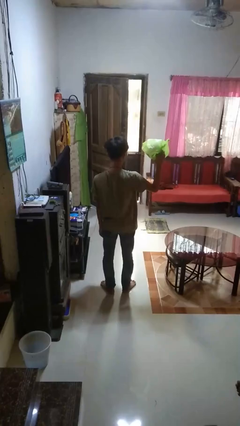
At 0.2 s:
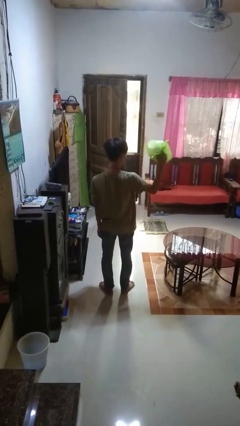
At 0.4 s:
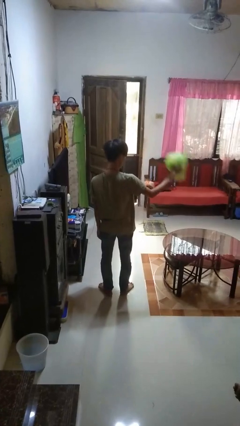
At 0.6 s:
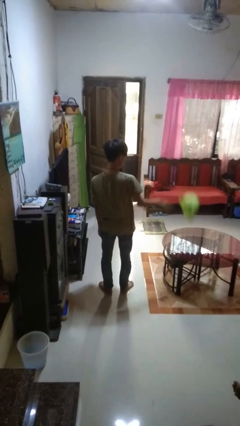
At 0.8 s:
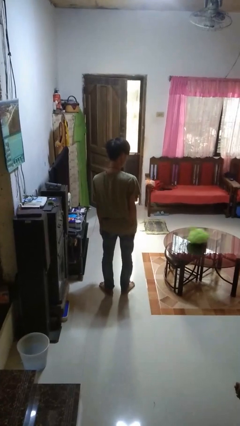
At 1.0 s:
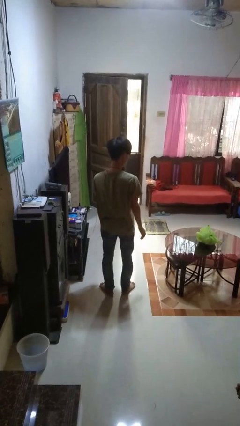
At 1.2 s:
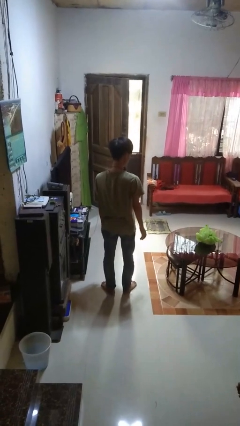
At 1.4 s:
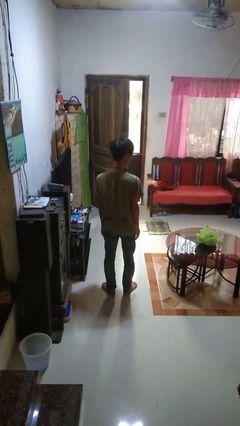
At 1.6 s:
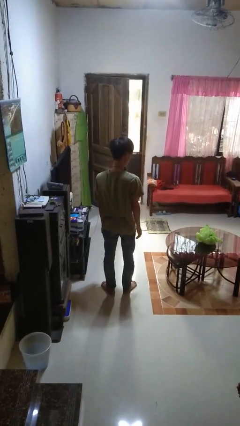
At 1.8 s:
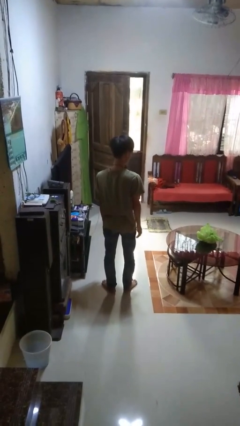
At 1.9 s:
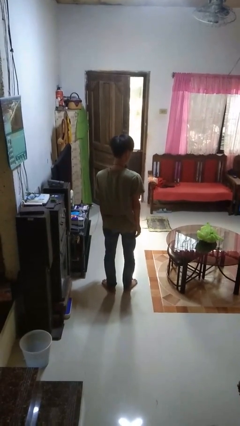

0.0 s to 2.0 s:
person throws object on table

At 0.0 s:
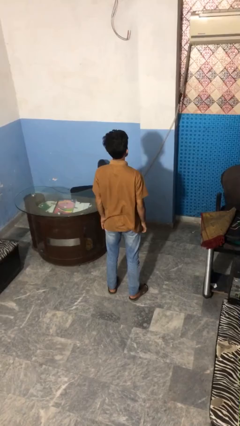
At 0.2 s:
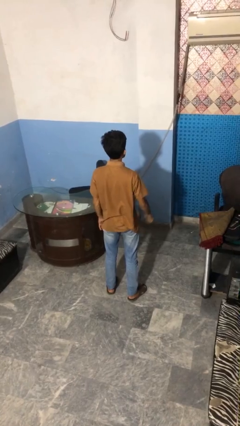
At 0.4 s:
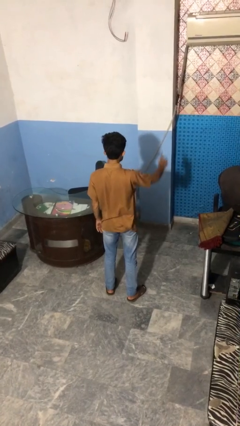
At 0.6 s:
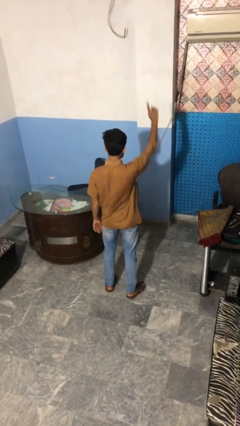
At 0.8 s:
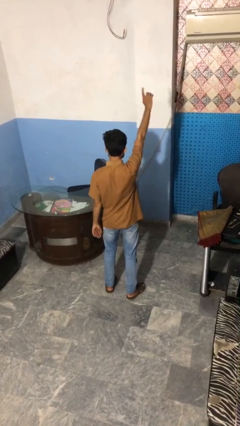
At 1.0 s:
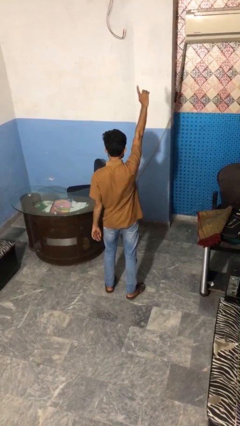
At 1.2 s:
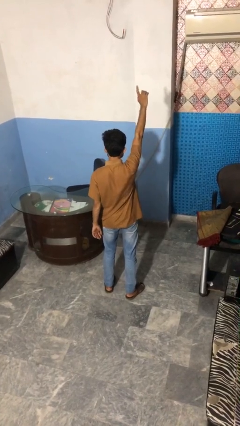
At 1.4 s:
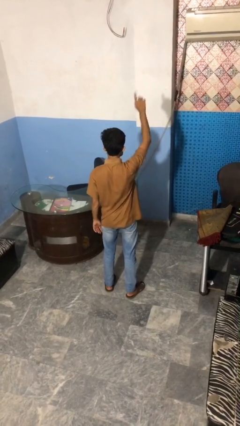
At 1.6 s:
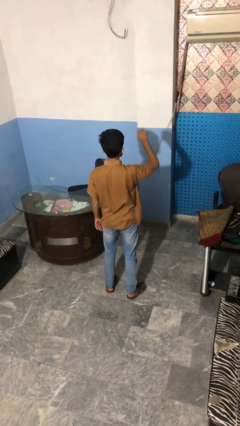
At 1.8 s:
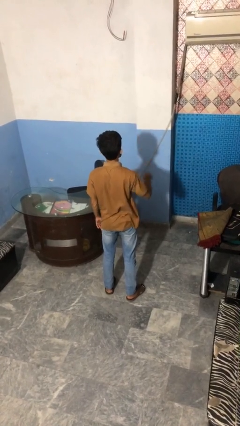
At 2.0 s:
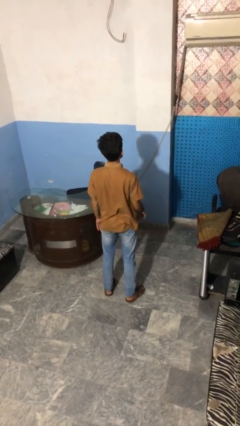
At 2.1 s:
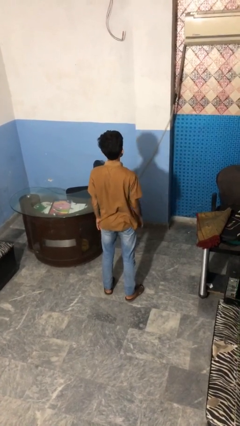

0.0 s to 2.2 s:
person gestures number one

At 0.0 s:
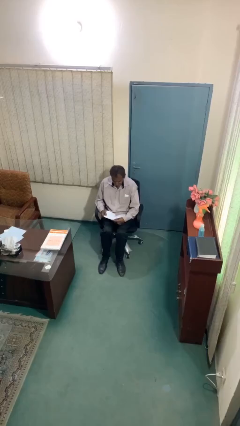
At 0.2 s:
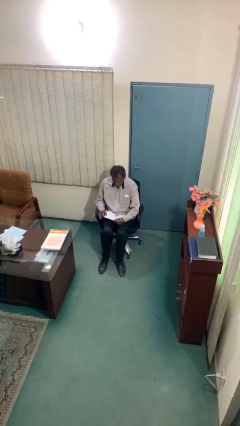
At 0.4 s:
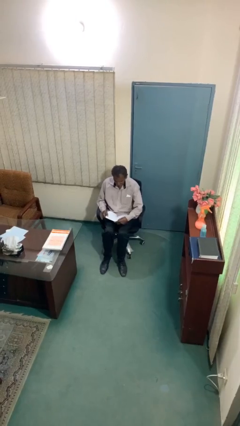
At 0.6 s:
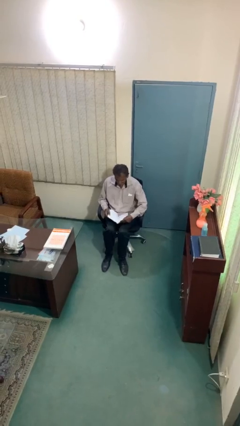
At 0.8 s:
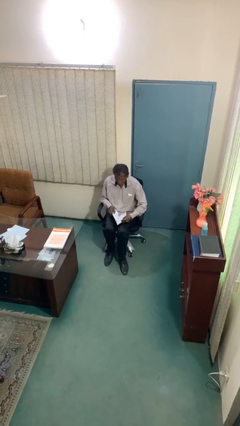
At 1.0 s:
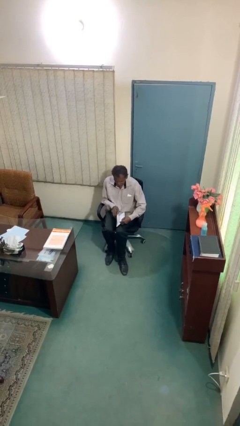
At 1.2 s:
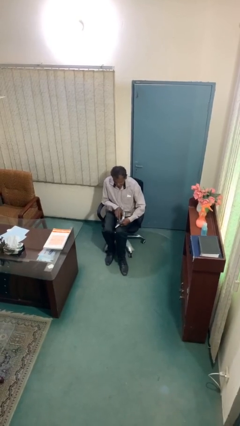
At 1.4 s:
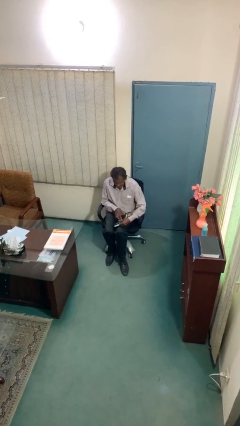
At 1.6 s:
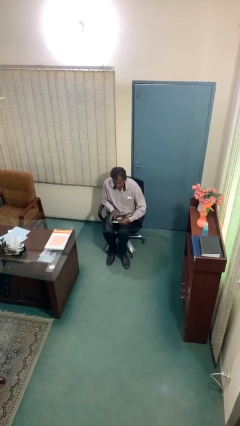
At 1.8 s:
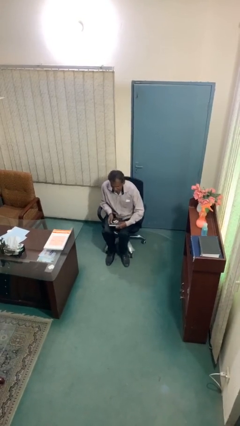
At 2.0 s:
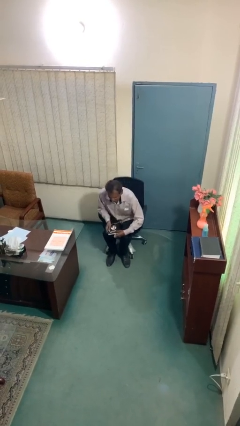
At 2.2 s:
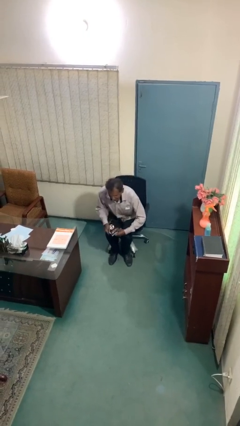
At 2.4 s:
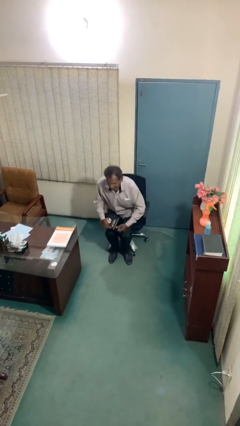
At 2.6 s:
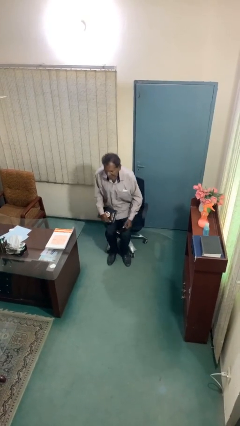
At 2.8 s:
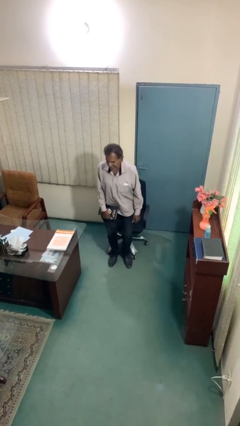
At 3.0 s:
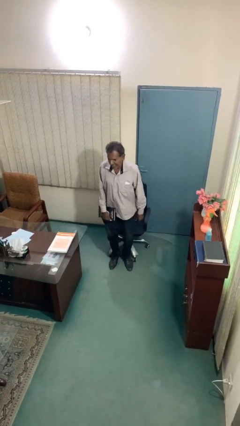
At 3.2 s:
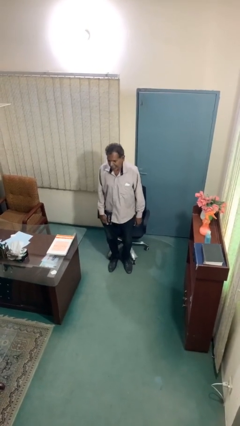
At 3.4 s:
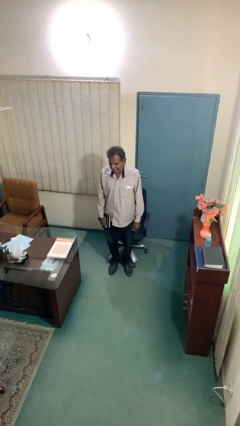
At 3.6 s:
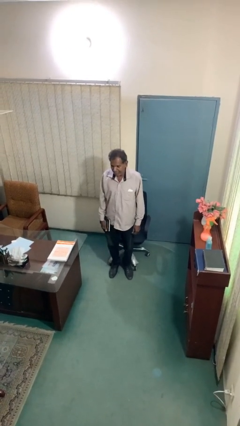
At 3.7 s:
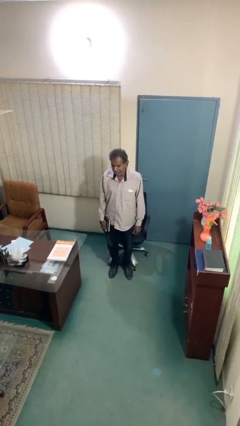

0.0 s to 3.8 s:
person stands up

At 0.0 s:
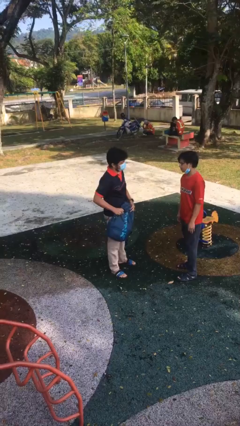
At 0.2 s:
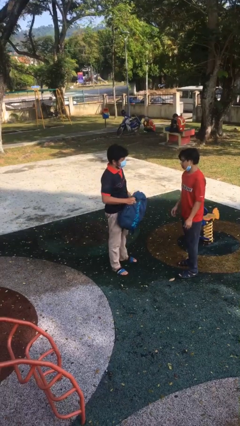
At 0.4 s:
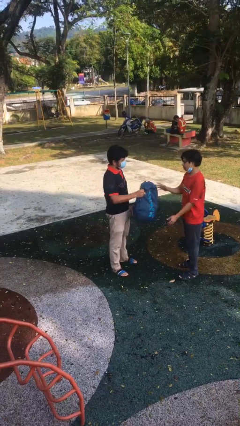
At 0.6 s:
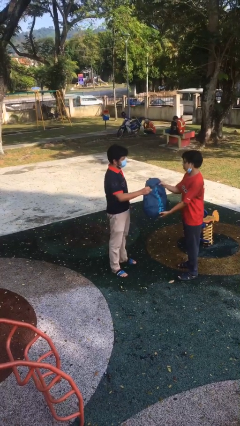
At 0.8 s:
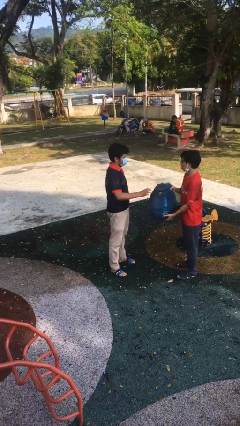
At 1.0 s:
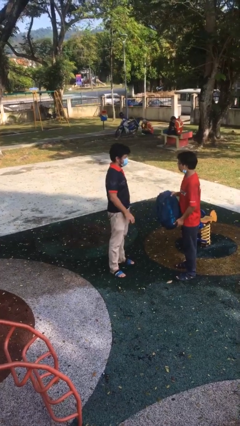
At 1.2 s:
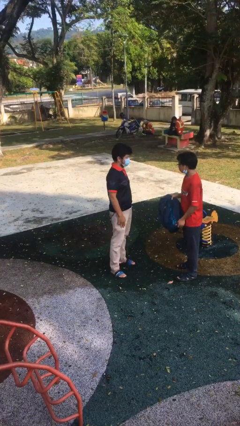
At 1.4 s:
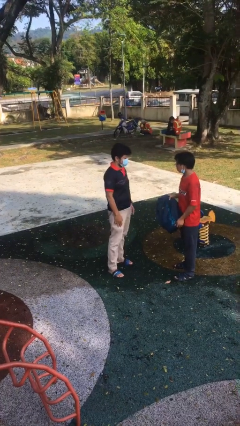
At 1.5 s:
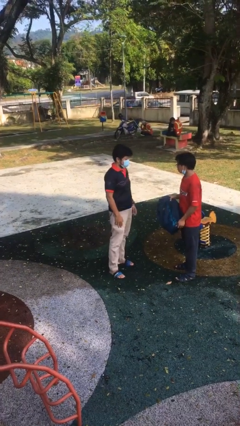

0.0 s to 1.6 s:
person transfers object to person

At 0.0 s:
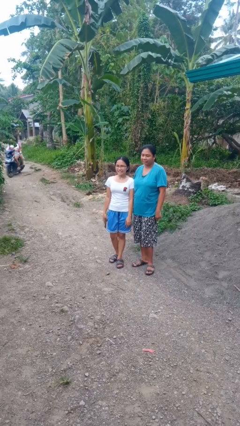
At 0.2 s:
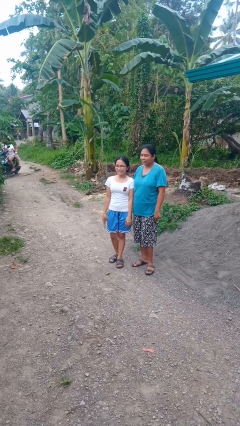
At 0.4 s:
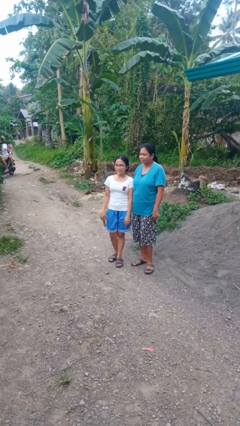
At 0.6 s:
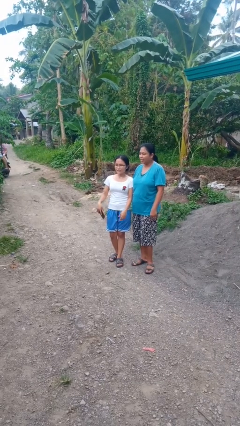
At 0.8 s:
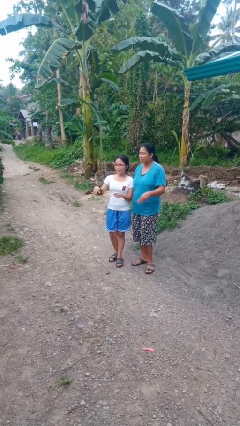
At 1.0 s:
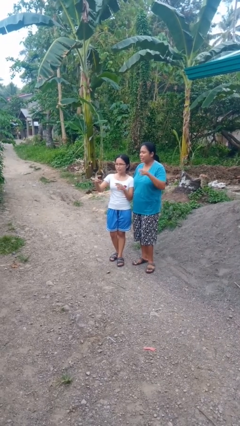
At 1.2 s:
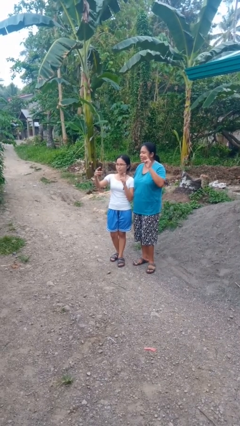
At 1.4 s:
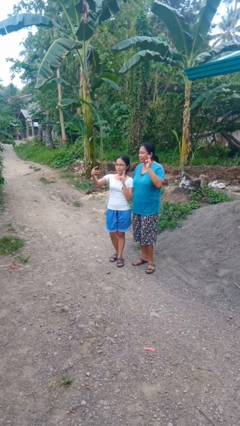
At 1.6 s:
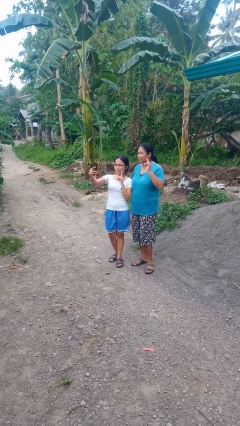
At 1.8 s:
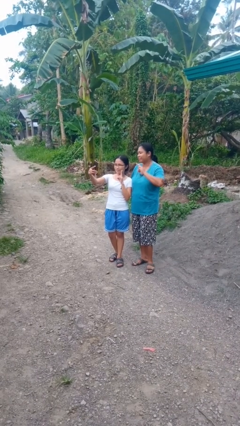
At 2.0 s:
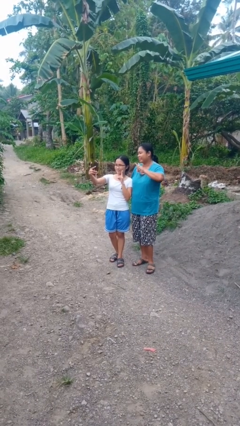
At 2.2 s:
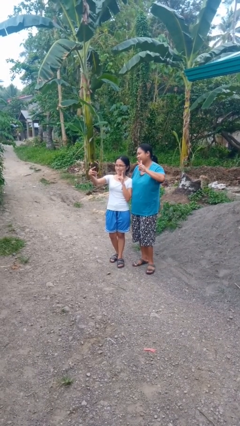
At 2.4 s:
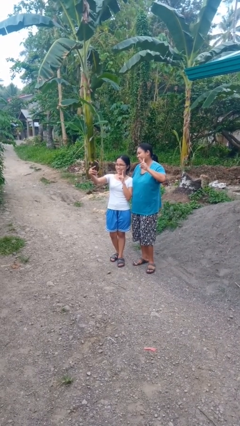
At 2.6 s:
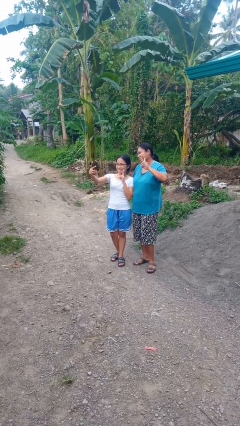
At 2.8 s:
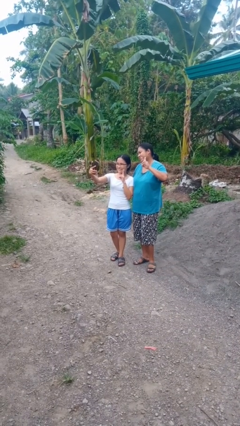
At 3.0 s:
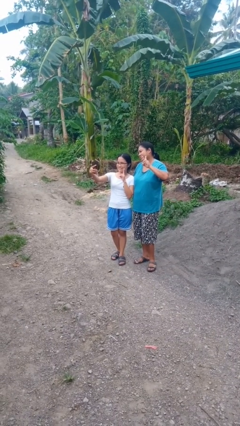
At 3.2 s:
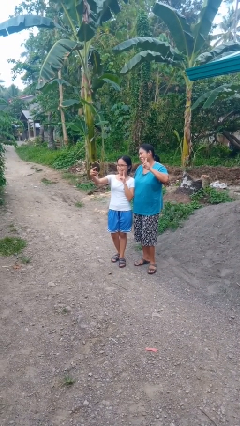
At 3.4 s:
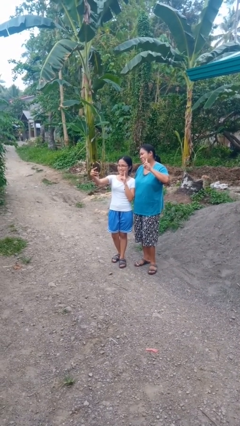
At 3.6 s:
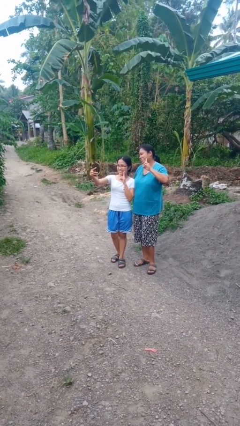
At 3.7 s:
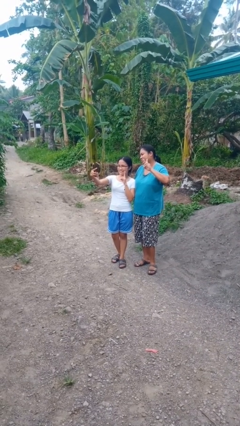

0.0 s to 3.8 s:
person takes selfie with person

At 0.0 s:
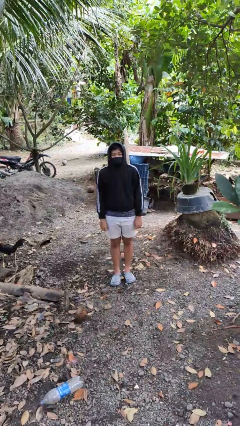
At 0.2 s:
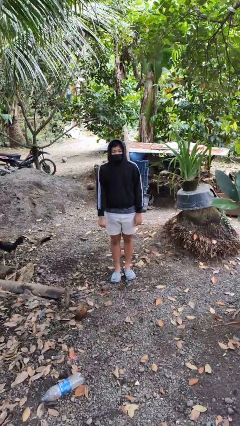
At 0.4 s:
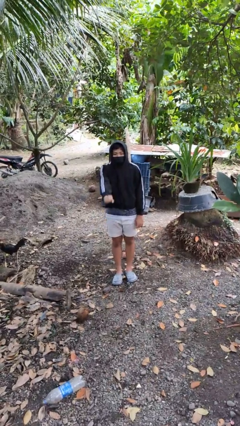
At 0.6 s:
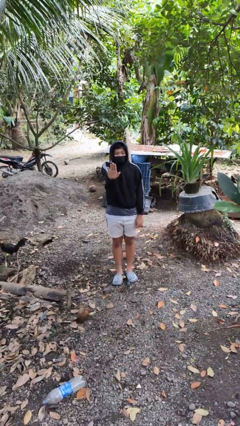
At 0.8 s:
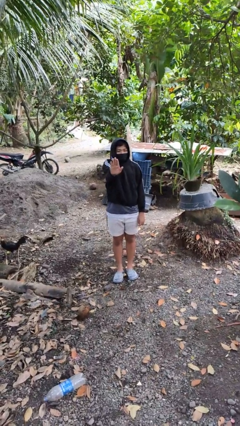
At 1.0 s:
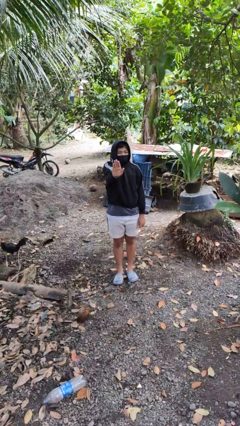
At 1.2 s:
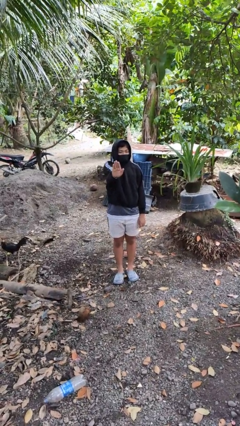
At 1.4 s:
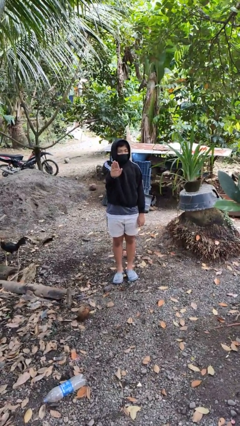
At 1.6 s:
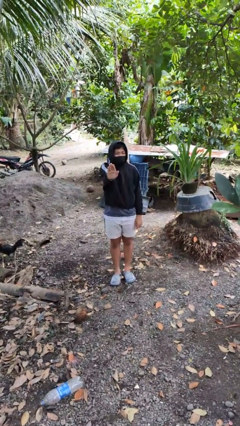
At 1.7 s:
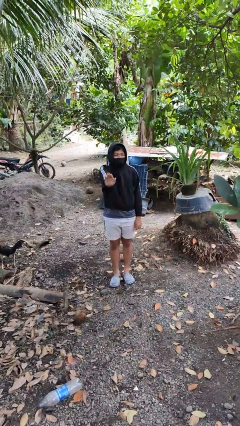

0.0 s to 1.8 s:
person gestures stop

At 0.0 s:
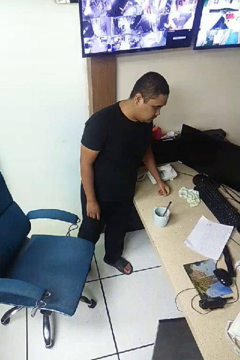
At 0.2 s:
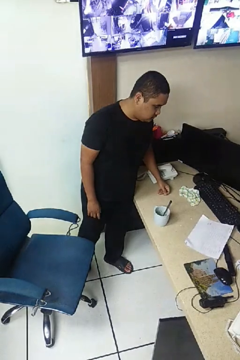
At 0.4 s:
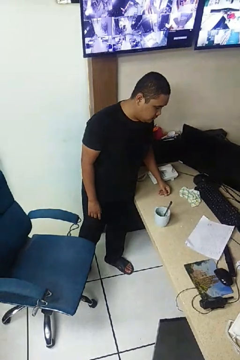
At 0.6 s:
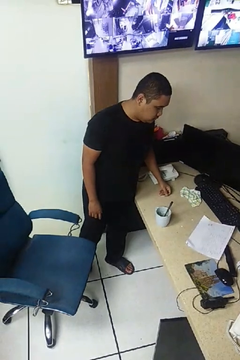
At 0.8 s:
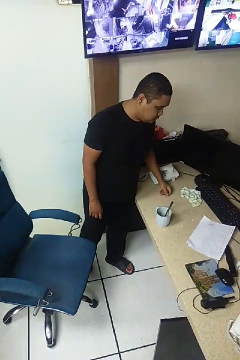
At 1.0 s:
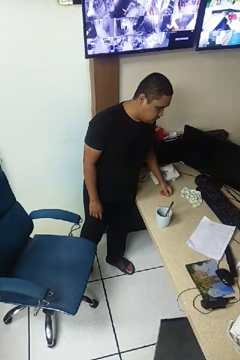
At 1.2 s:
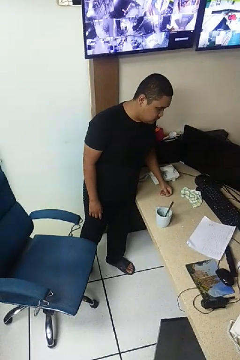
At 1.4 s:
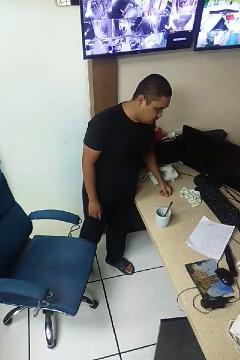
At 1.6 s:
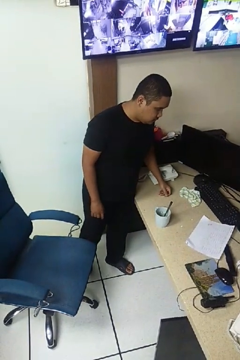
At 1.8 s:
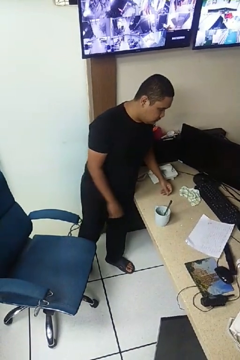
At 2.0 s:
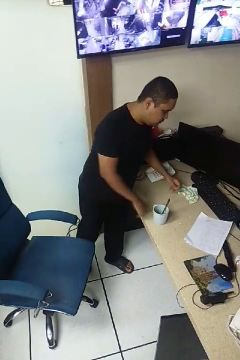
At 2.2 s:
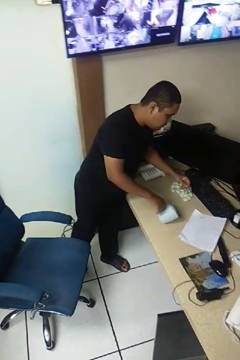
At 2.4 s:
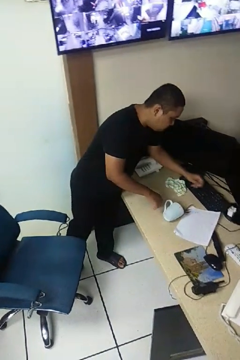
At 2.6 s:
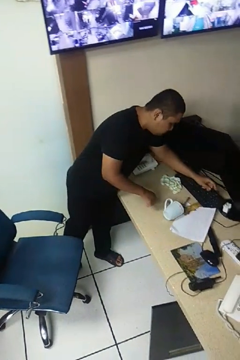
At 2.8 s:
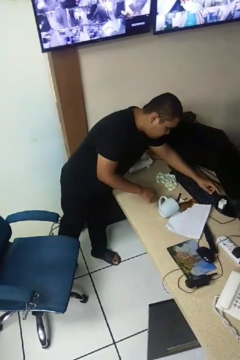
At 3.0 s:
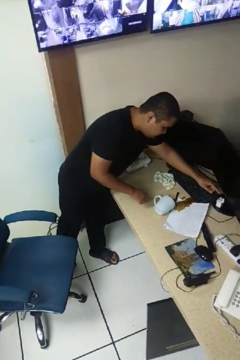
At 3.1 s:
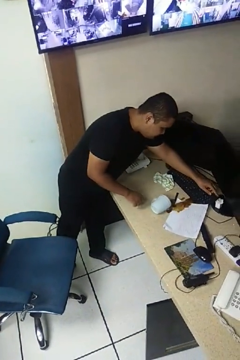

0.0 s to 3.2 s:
person spills on floor
